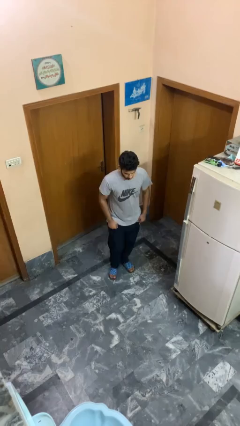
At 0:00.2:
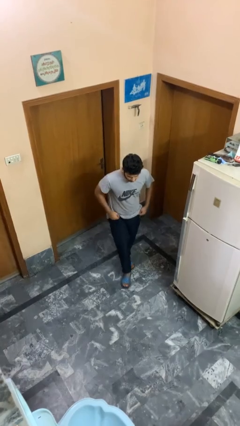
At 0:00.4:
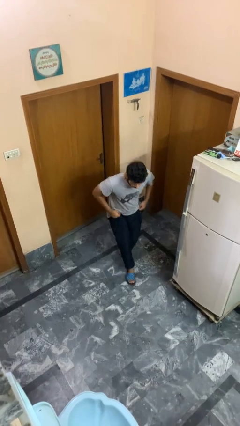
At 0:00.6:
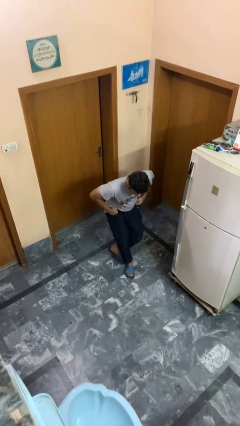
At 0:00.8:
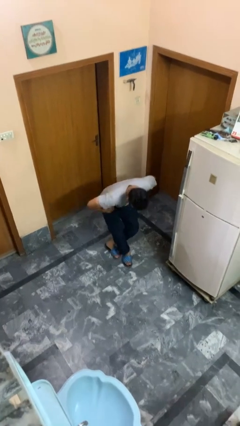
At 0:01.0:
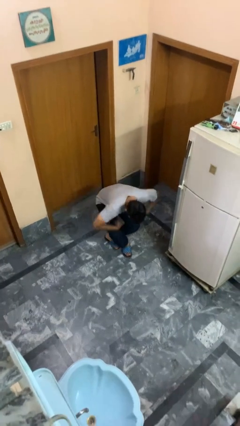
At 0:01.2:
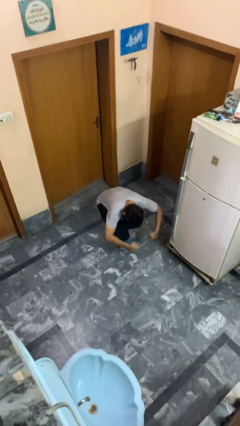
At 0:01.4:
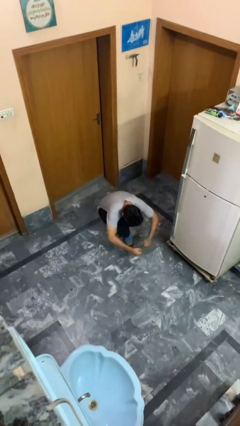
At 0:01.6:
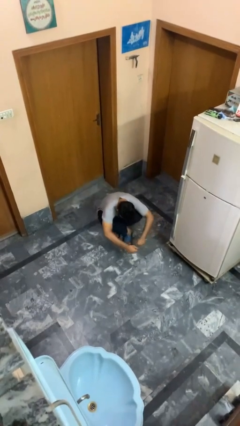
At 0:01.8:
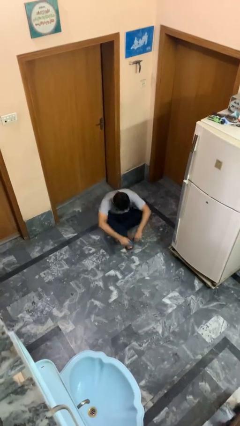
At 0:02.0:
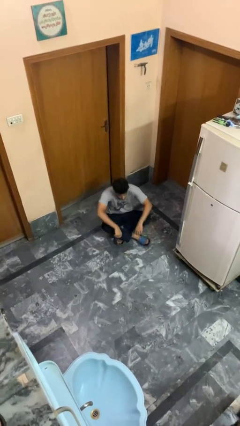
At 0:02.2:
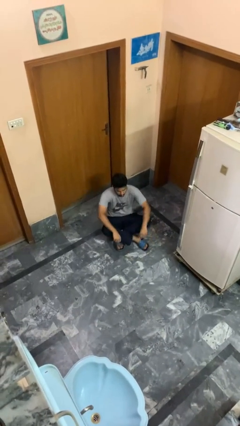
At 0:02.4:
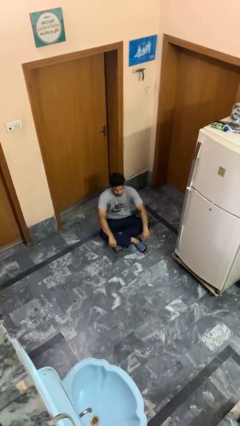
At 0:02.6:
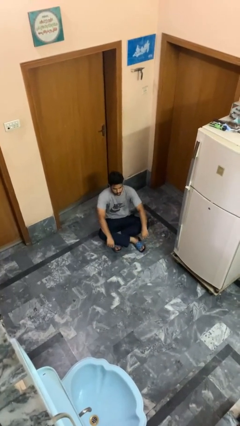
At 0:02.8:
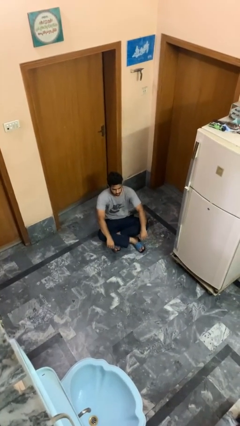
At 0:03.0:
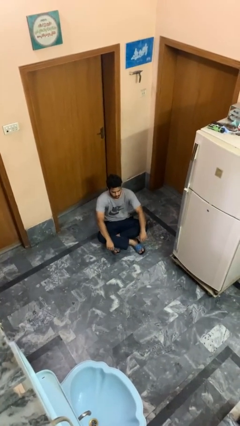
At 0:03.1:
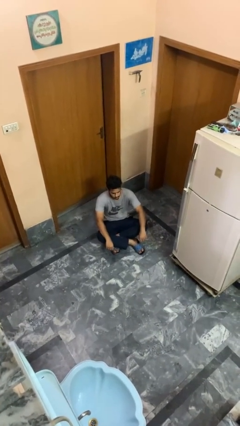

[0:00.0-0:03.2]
person sits crisscross

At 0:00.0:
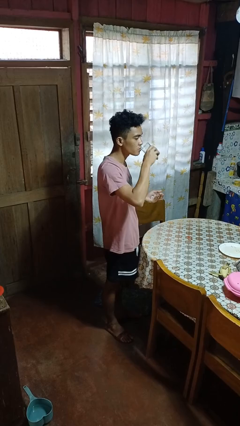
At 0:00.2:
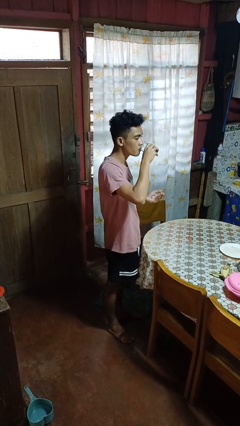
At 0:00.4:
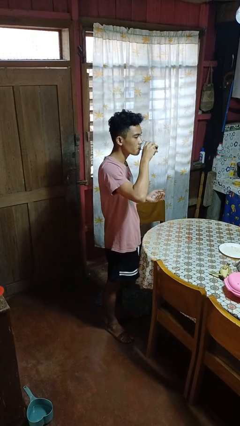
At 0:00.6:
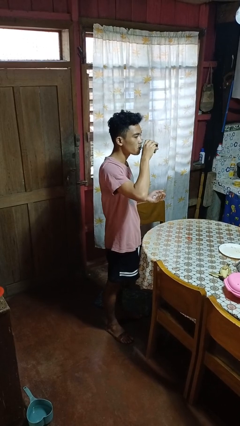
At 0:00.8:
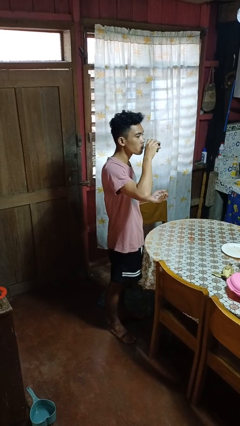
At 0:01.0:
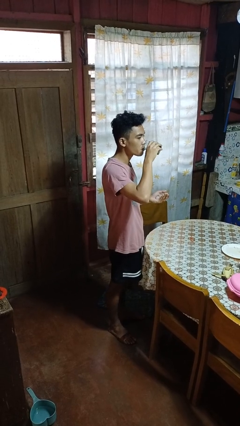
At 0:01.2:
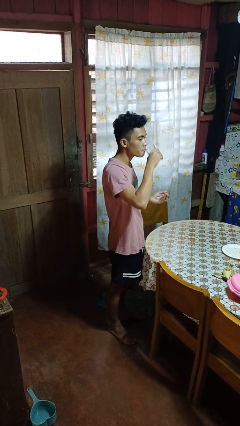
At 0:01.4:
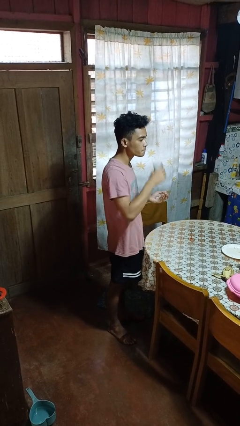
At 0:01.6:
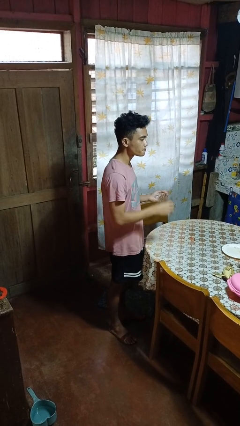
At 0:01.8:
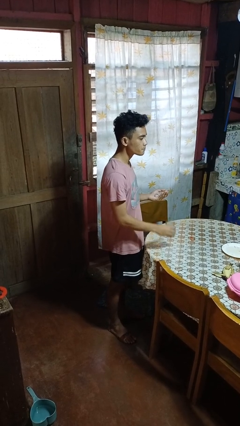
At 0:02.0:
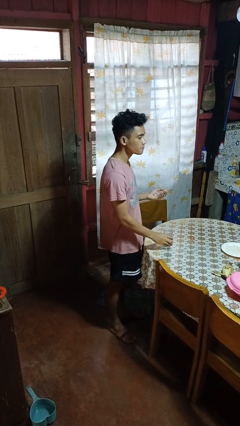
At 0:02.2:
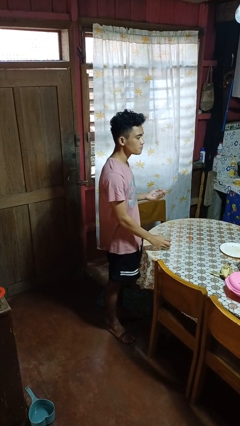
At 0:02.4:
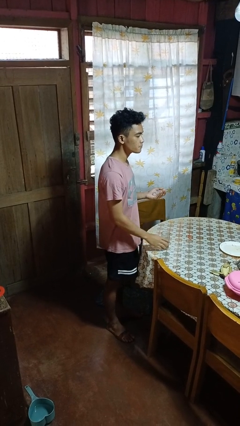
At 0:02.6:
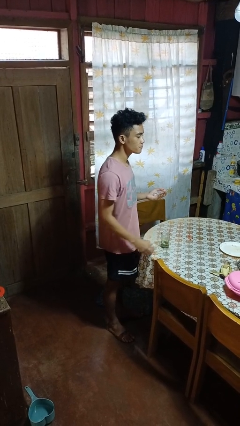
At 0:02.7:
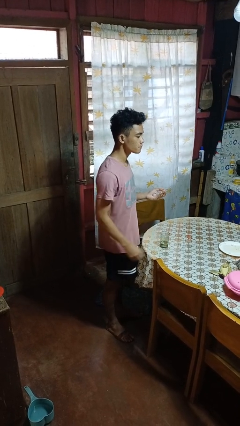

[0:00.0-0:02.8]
person drinks from cup

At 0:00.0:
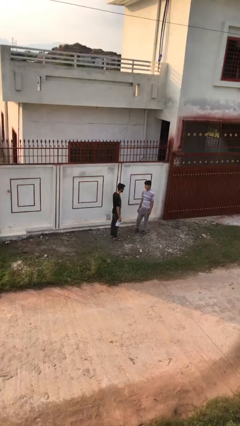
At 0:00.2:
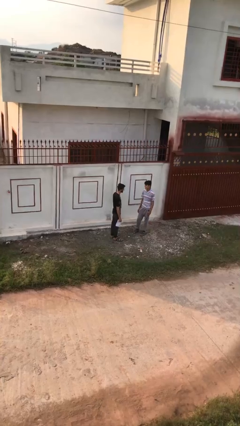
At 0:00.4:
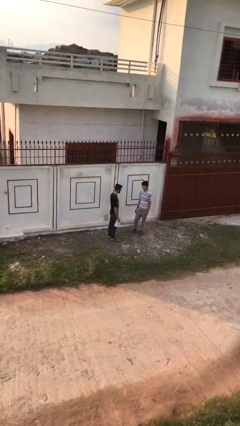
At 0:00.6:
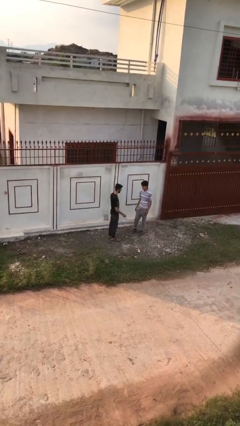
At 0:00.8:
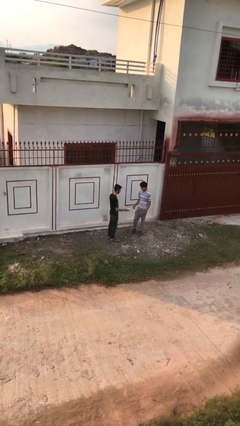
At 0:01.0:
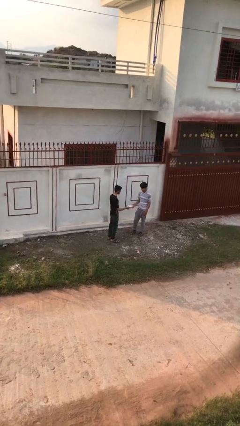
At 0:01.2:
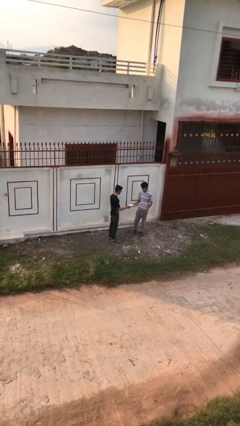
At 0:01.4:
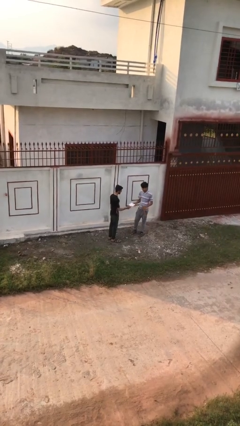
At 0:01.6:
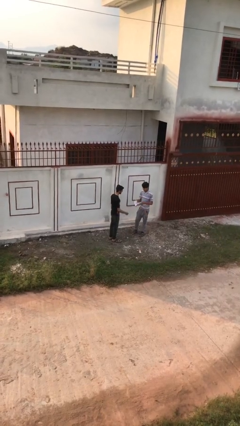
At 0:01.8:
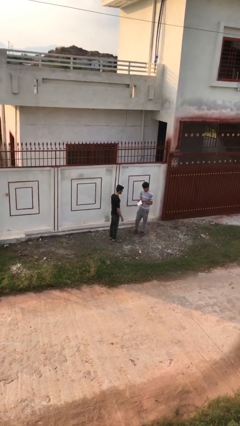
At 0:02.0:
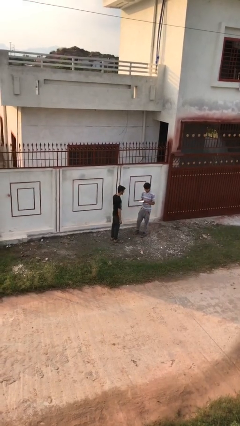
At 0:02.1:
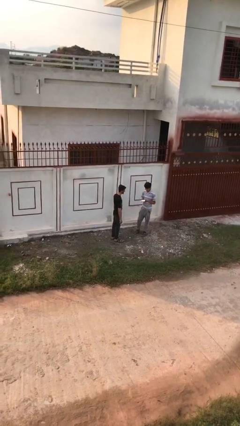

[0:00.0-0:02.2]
person transfers object to person

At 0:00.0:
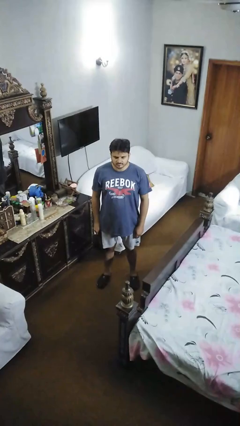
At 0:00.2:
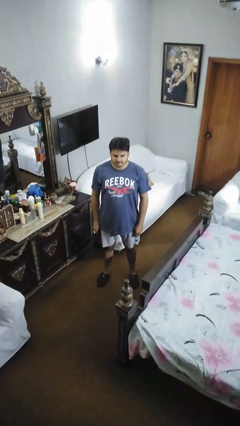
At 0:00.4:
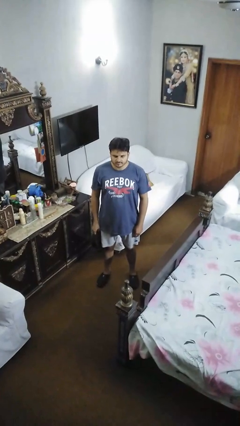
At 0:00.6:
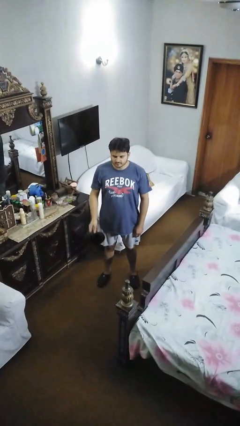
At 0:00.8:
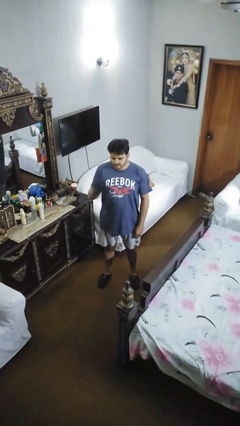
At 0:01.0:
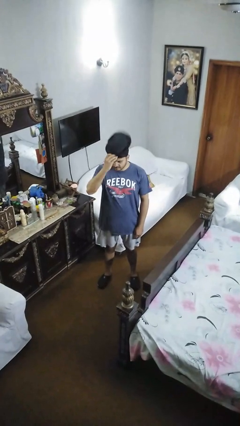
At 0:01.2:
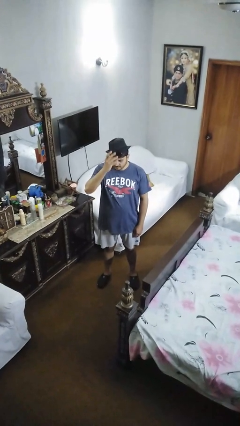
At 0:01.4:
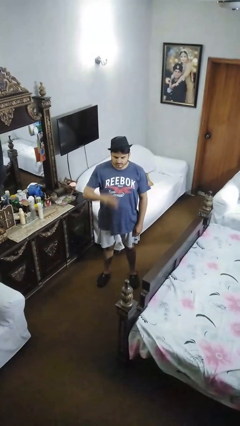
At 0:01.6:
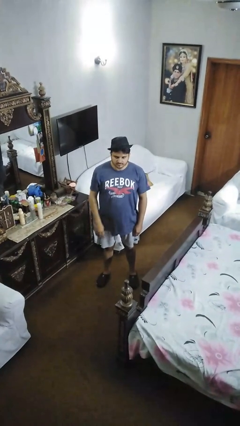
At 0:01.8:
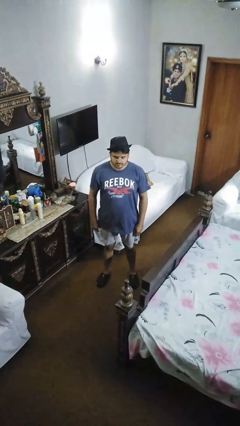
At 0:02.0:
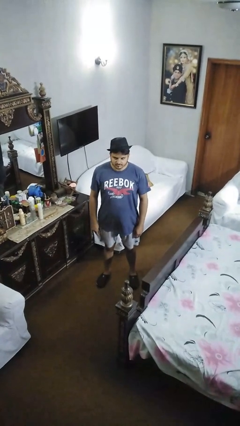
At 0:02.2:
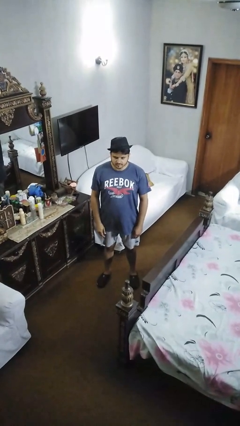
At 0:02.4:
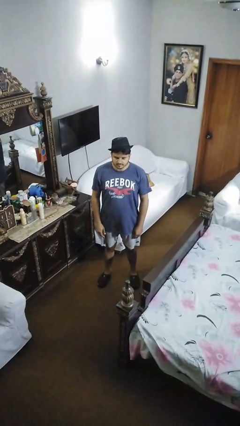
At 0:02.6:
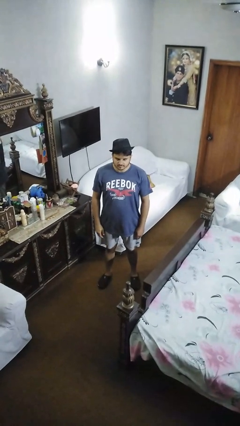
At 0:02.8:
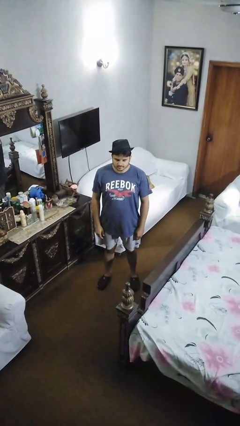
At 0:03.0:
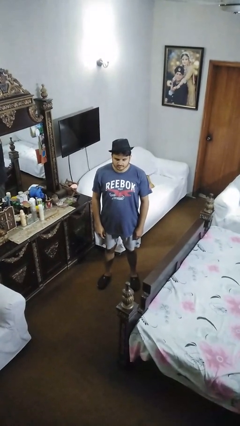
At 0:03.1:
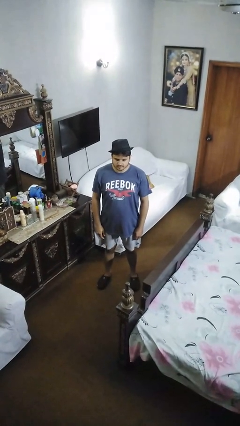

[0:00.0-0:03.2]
person puts on hat

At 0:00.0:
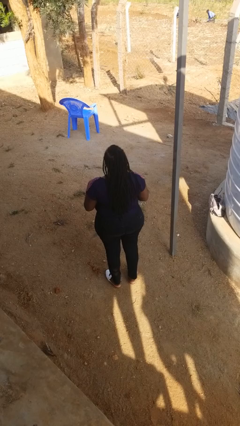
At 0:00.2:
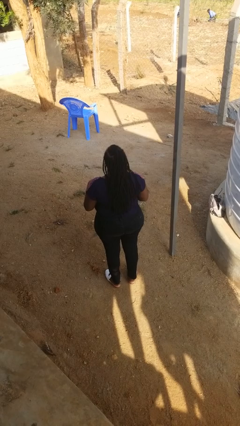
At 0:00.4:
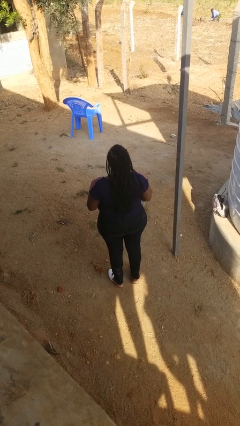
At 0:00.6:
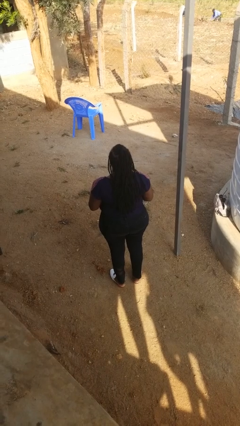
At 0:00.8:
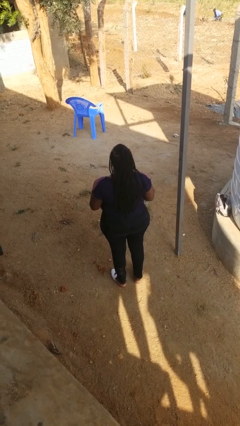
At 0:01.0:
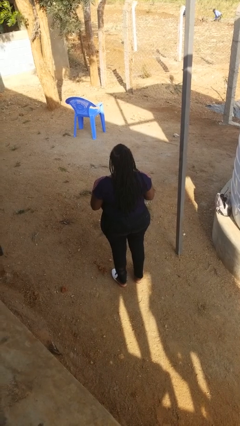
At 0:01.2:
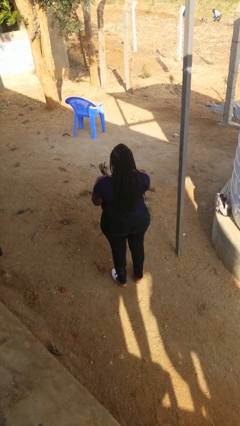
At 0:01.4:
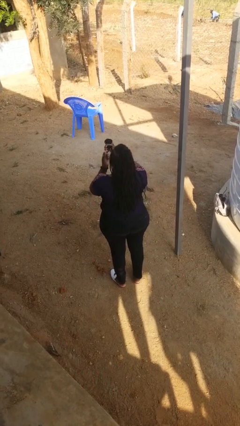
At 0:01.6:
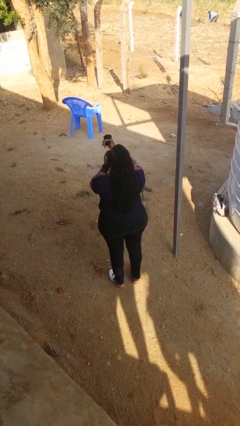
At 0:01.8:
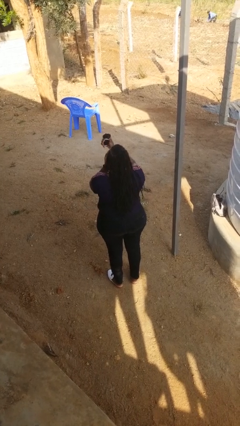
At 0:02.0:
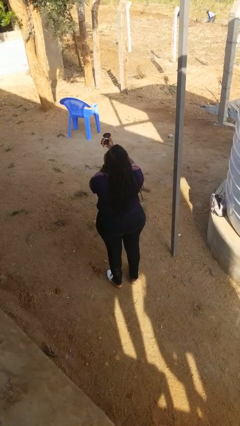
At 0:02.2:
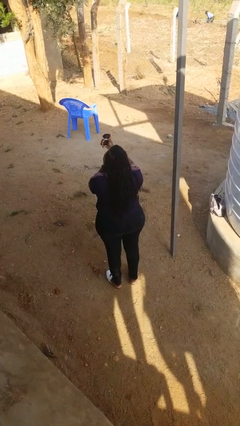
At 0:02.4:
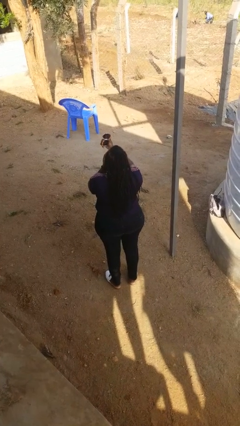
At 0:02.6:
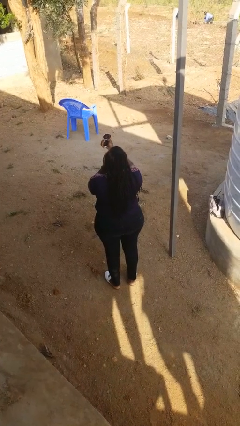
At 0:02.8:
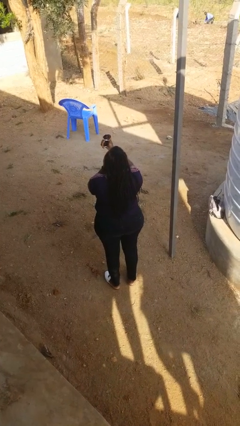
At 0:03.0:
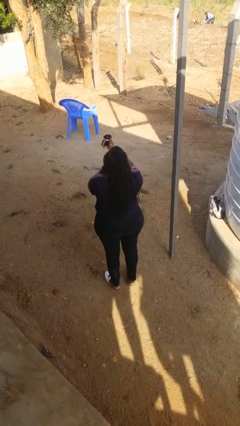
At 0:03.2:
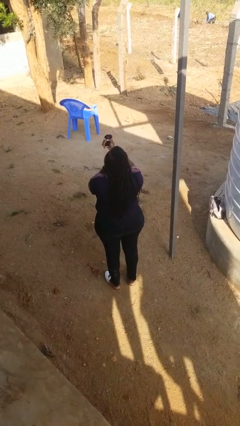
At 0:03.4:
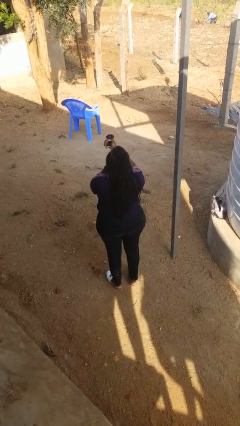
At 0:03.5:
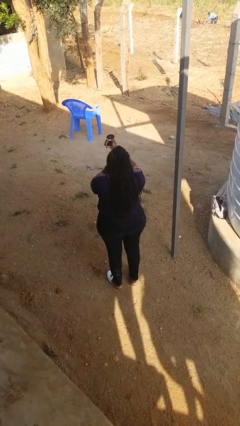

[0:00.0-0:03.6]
person applies eye makeup

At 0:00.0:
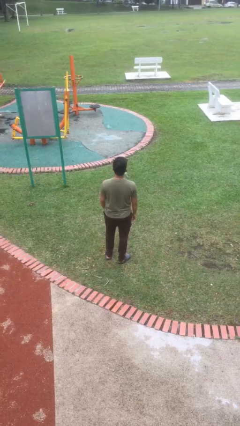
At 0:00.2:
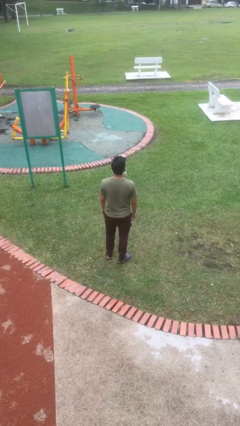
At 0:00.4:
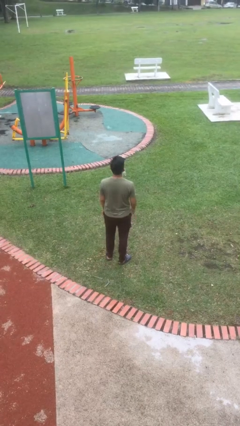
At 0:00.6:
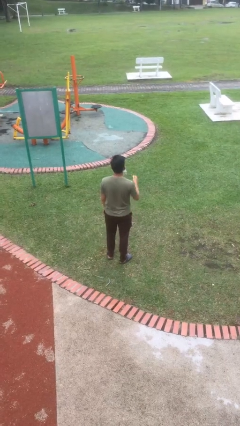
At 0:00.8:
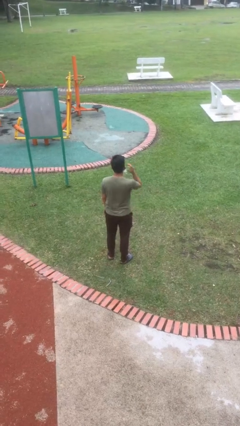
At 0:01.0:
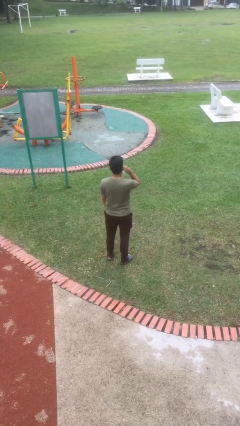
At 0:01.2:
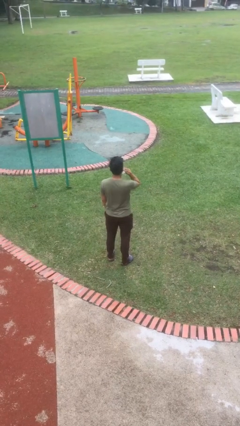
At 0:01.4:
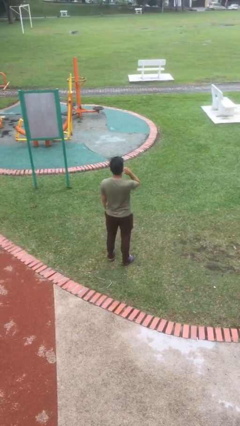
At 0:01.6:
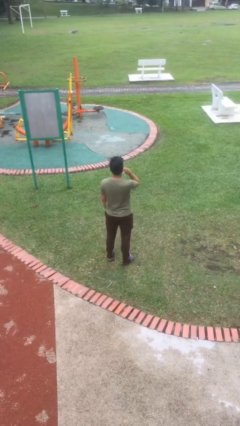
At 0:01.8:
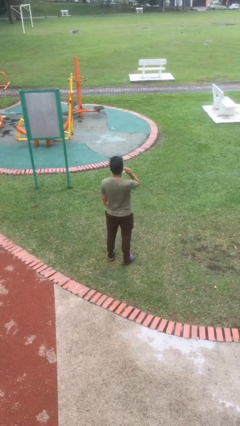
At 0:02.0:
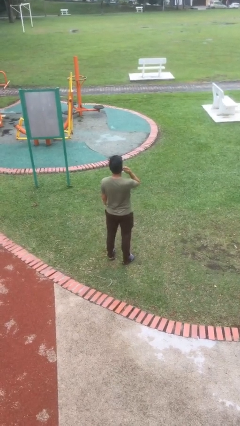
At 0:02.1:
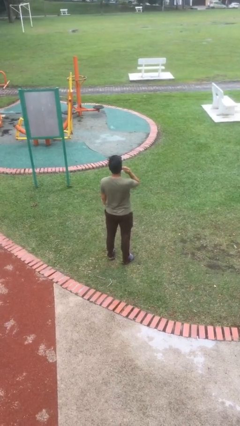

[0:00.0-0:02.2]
person touches earlobe

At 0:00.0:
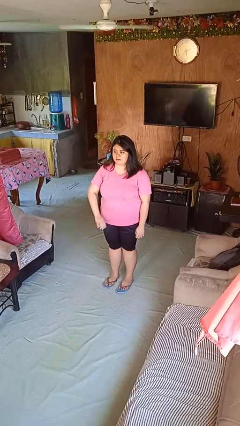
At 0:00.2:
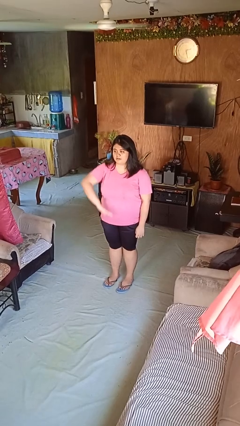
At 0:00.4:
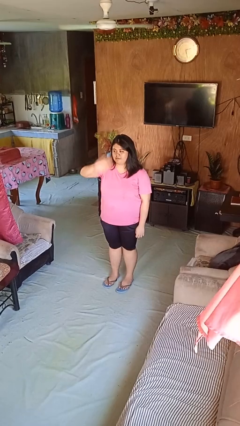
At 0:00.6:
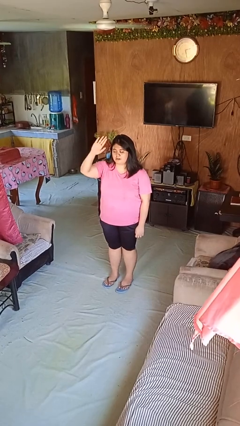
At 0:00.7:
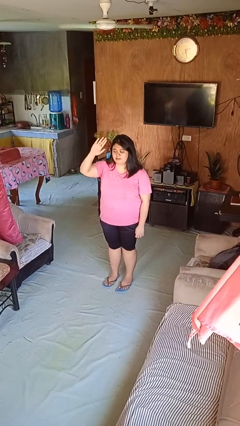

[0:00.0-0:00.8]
person gestures swipe up
